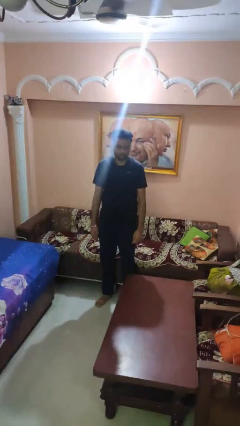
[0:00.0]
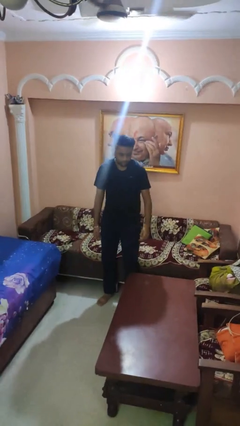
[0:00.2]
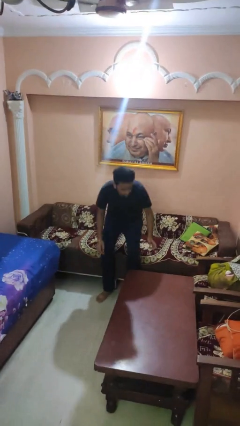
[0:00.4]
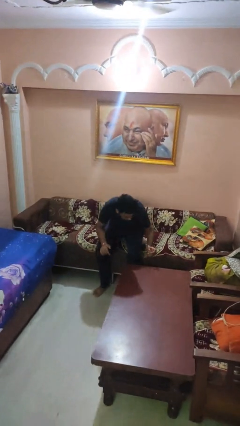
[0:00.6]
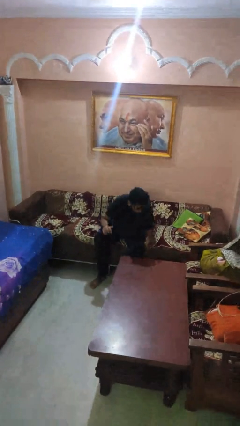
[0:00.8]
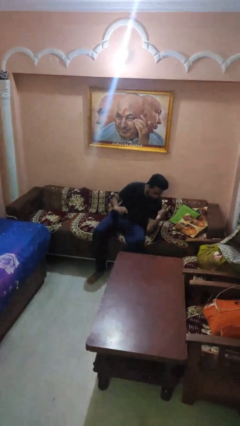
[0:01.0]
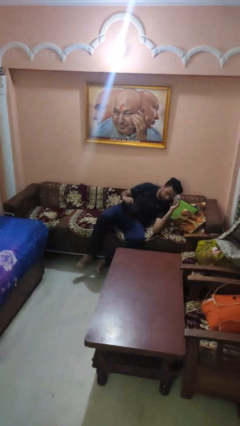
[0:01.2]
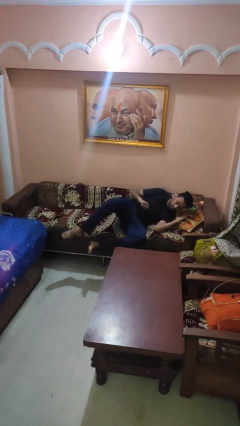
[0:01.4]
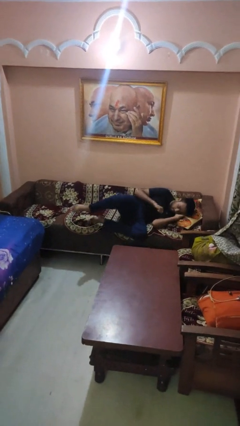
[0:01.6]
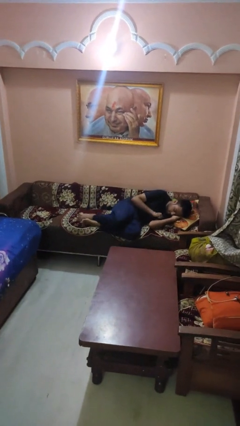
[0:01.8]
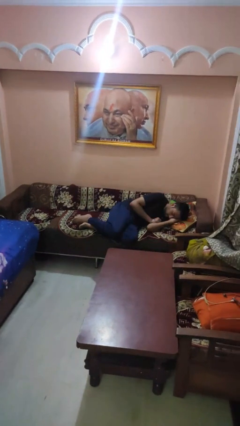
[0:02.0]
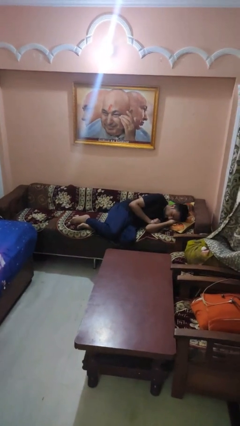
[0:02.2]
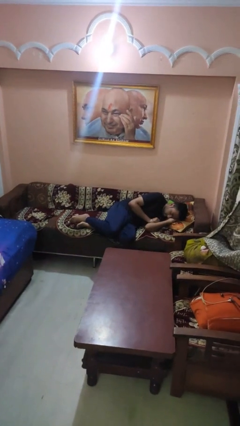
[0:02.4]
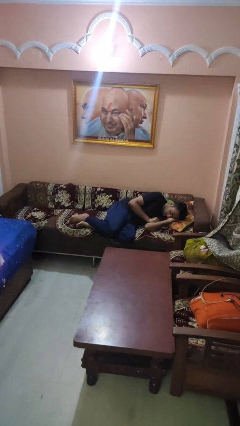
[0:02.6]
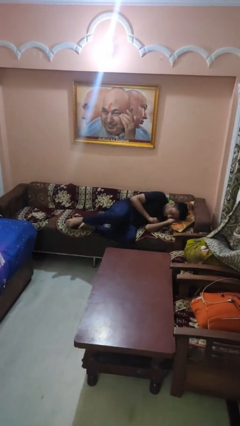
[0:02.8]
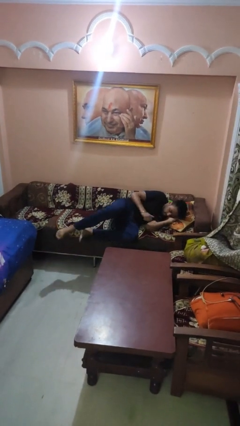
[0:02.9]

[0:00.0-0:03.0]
person lies down on couch

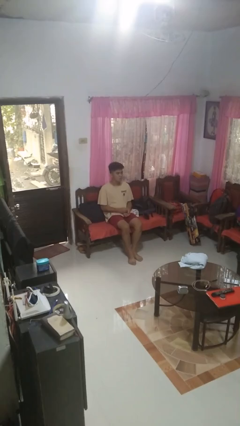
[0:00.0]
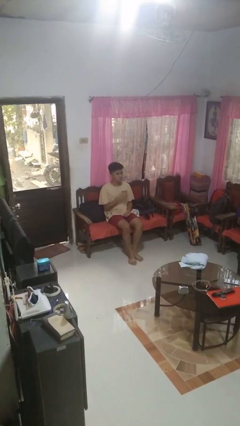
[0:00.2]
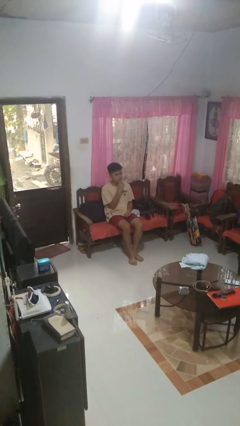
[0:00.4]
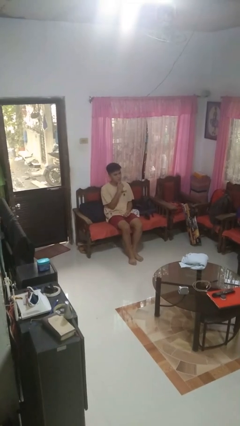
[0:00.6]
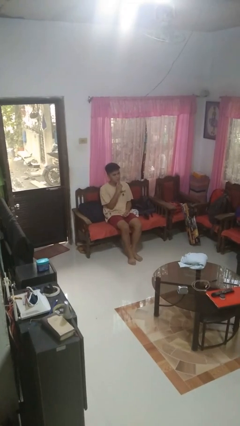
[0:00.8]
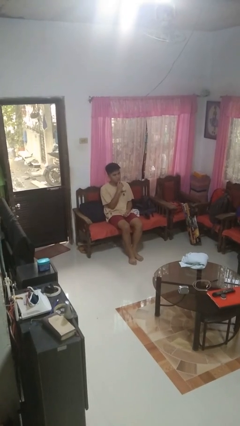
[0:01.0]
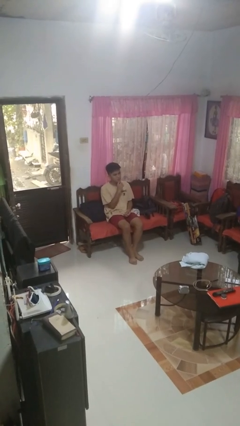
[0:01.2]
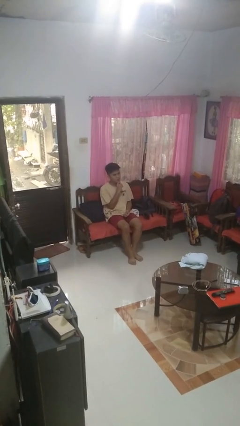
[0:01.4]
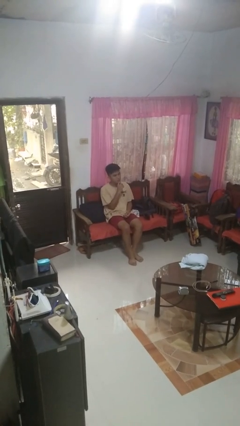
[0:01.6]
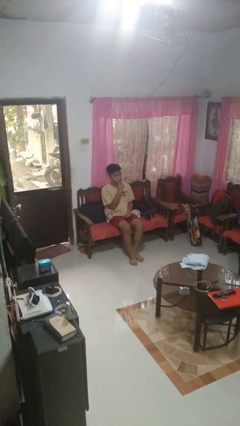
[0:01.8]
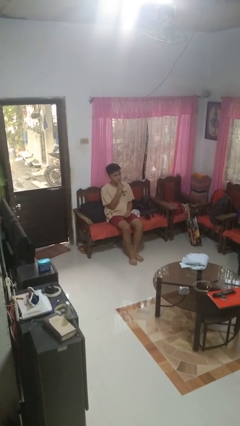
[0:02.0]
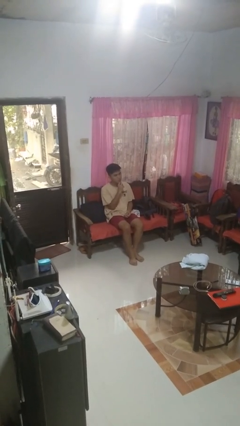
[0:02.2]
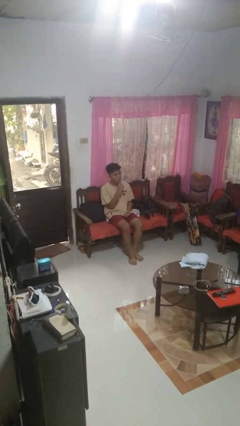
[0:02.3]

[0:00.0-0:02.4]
person strokes chin

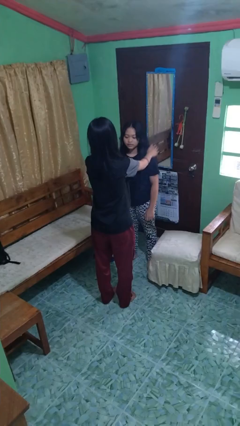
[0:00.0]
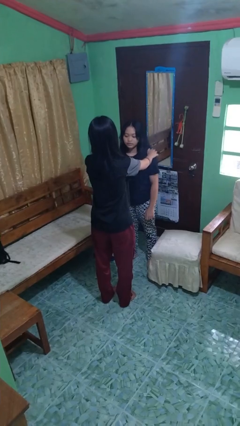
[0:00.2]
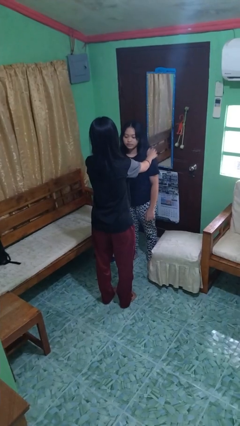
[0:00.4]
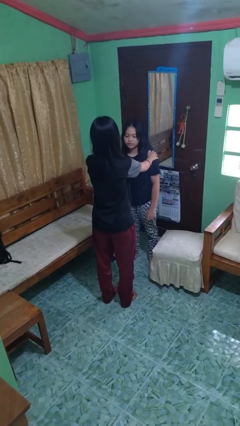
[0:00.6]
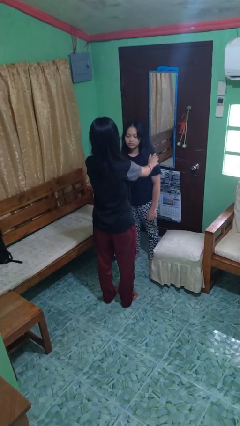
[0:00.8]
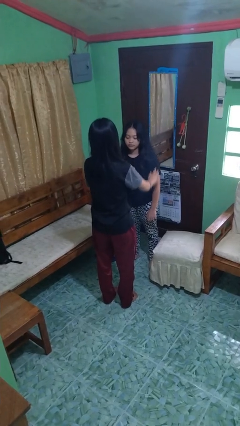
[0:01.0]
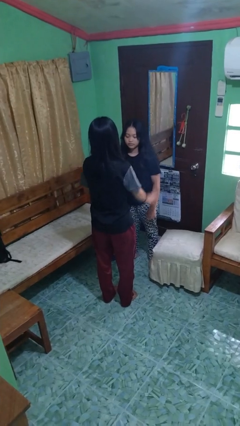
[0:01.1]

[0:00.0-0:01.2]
person pounds shoulders of person

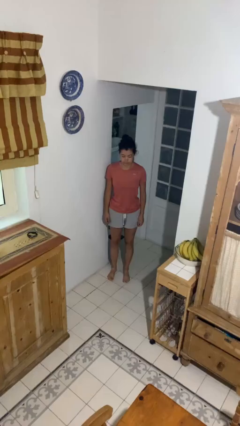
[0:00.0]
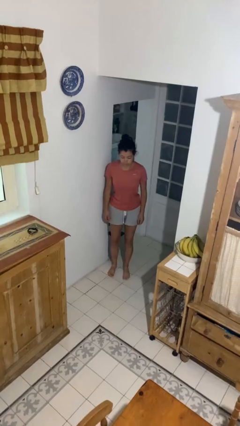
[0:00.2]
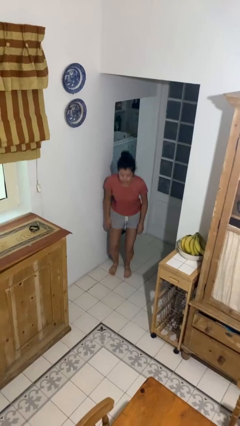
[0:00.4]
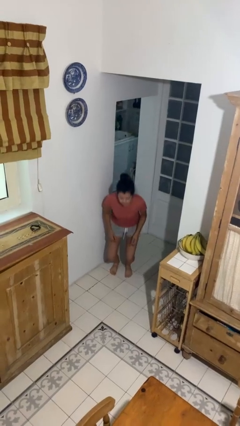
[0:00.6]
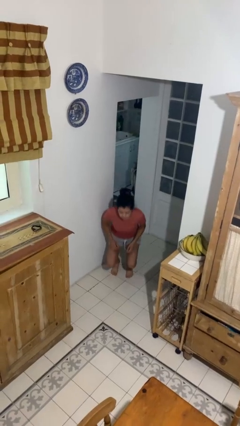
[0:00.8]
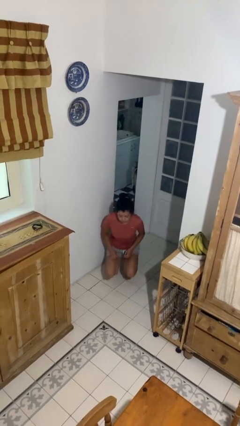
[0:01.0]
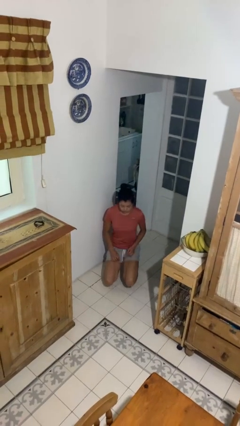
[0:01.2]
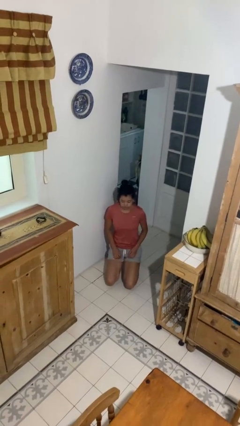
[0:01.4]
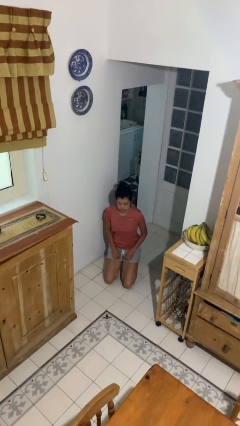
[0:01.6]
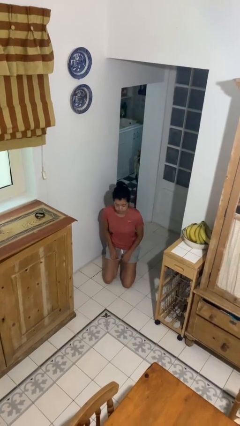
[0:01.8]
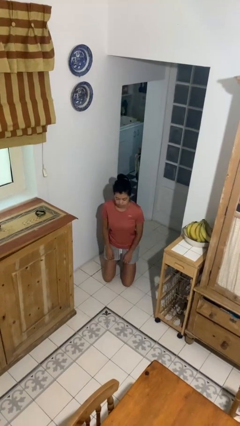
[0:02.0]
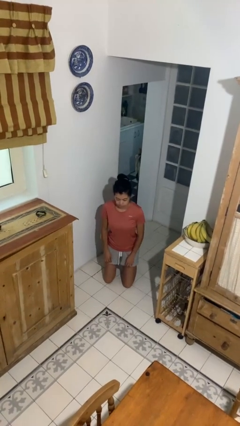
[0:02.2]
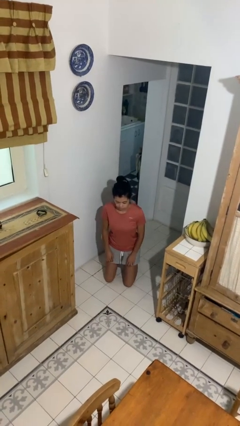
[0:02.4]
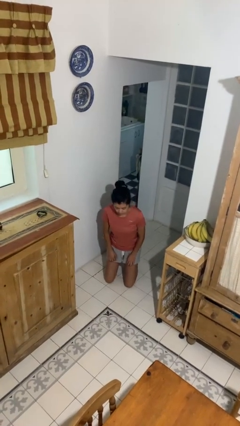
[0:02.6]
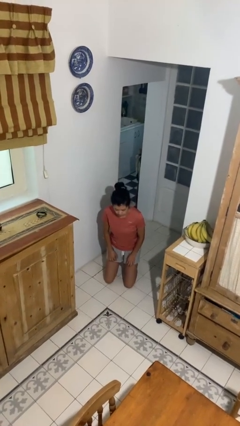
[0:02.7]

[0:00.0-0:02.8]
person kneels

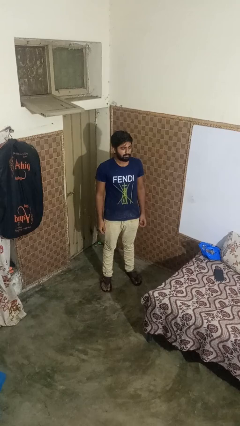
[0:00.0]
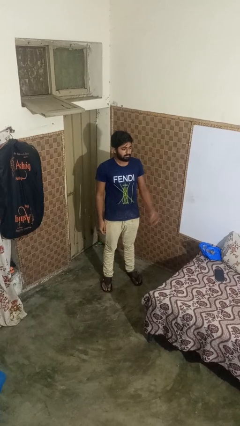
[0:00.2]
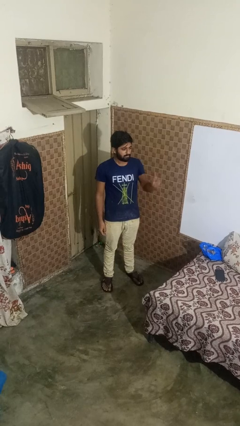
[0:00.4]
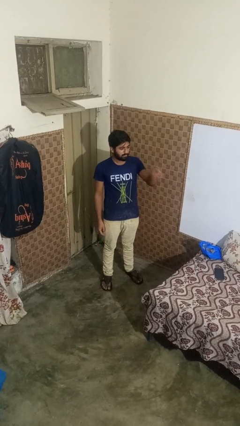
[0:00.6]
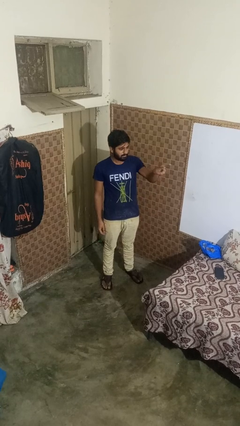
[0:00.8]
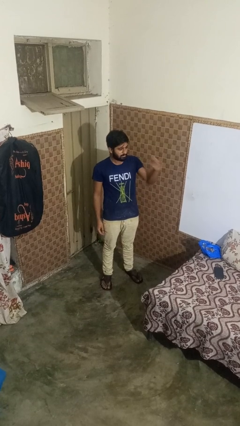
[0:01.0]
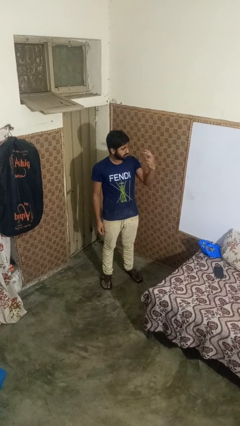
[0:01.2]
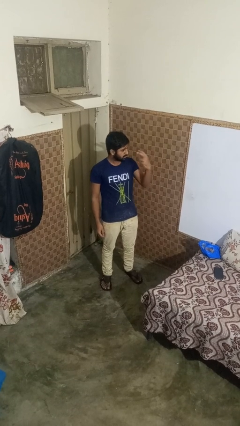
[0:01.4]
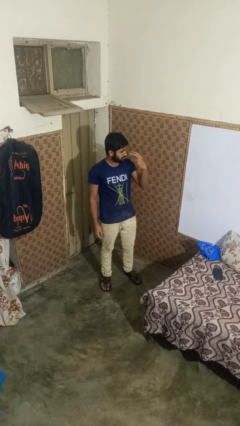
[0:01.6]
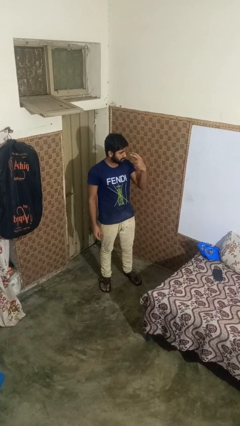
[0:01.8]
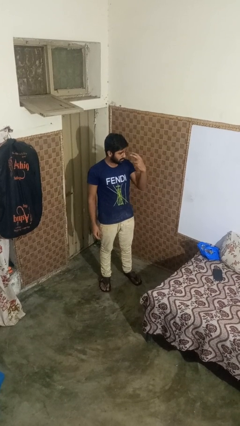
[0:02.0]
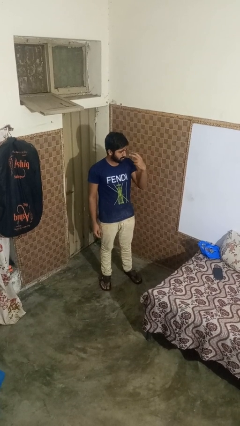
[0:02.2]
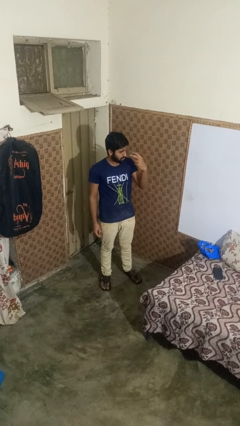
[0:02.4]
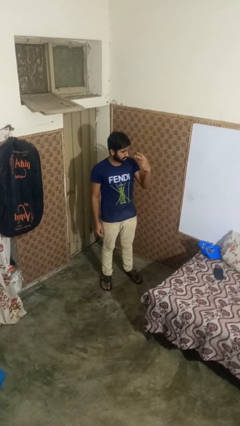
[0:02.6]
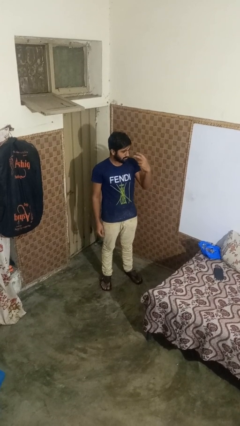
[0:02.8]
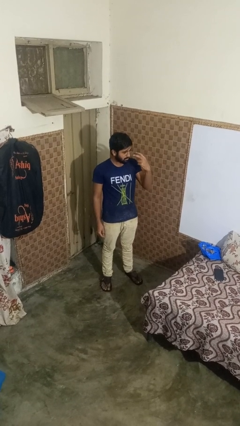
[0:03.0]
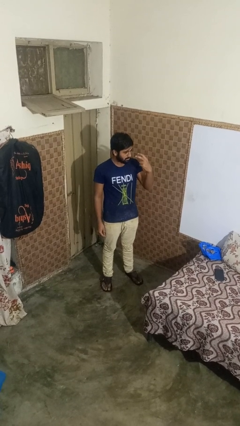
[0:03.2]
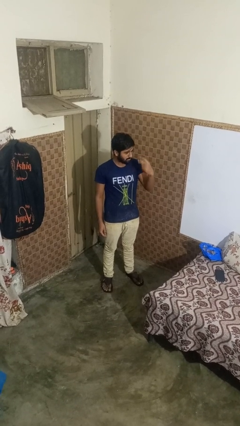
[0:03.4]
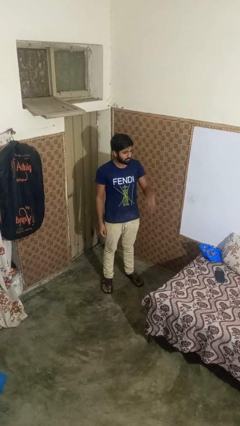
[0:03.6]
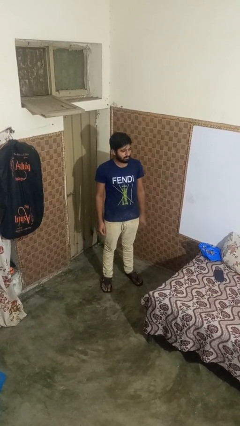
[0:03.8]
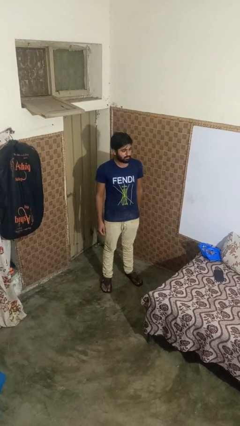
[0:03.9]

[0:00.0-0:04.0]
person gestures watch closely

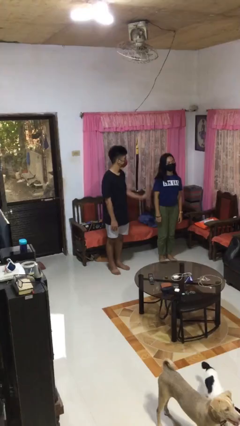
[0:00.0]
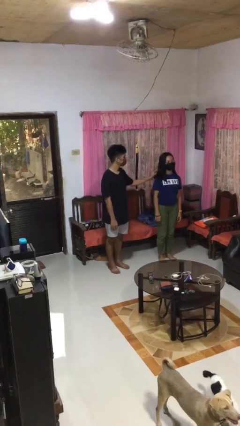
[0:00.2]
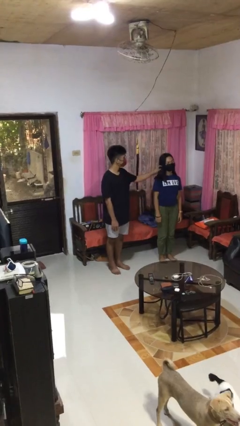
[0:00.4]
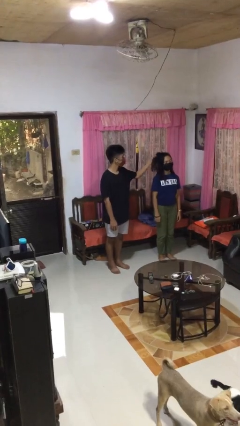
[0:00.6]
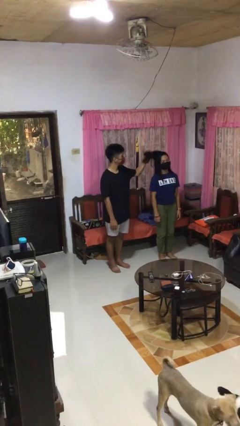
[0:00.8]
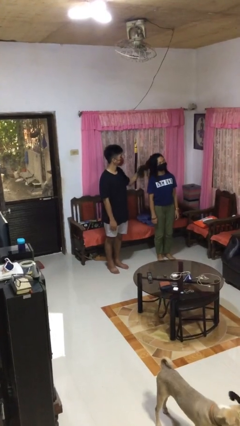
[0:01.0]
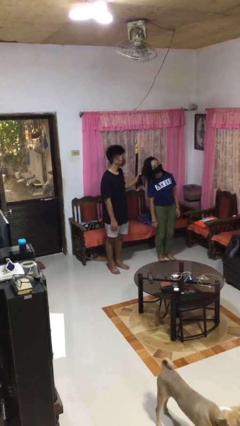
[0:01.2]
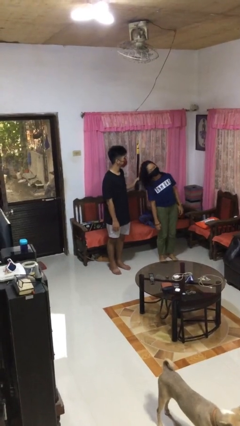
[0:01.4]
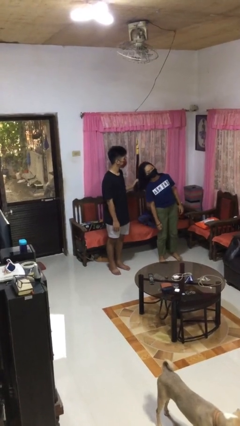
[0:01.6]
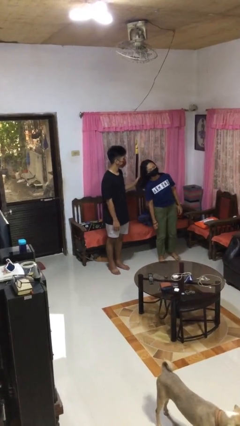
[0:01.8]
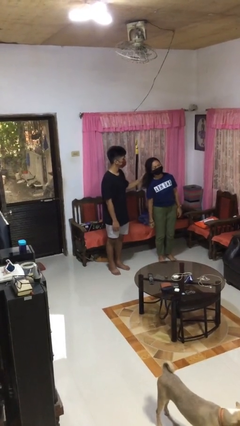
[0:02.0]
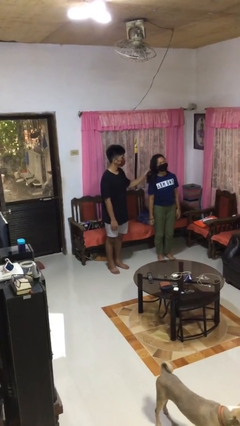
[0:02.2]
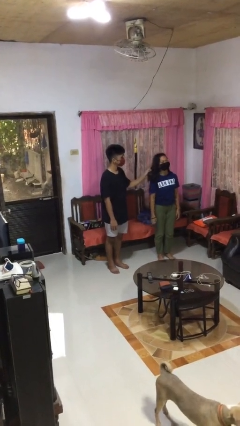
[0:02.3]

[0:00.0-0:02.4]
person grabs person by hair

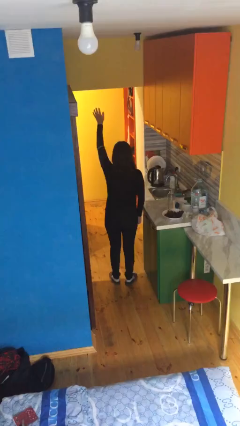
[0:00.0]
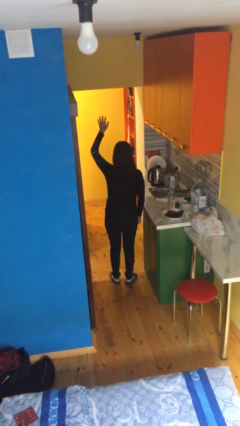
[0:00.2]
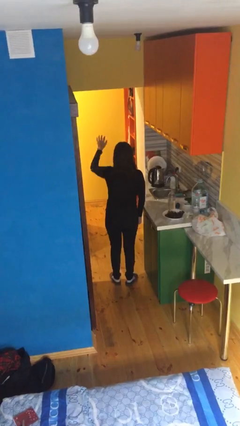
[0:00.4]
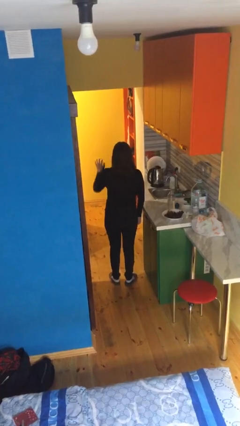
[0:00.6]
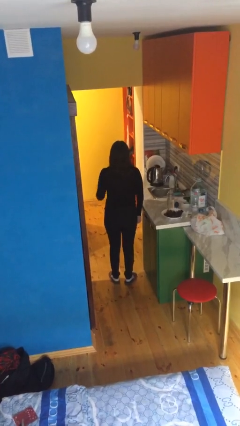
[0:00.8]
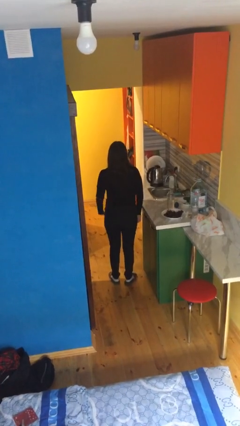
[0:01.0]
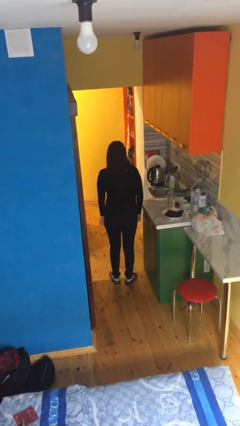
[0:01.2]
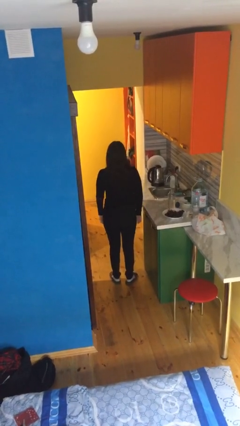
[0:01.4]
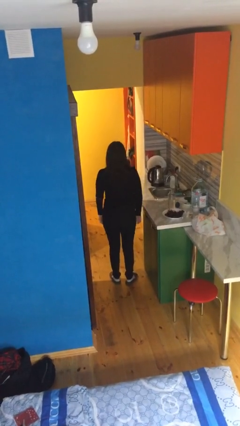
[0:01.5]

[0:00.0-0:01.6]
person gestures swipe down
